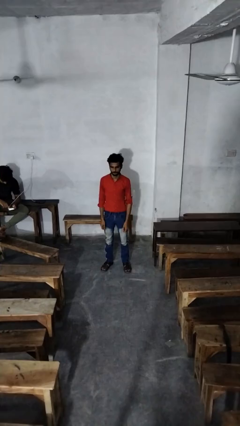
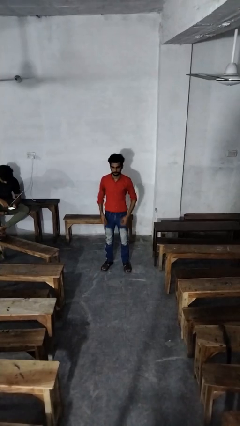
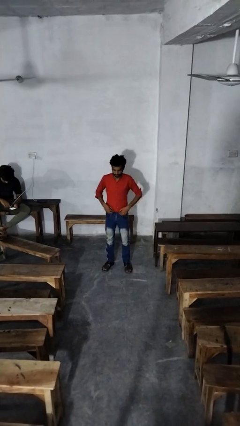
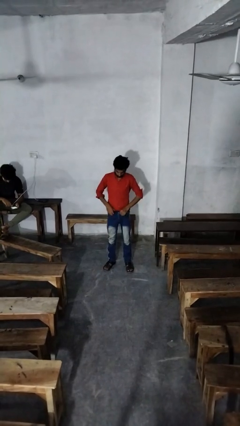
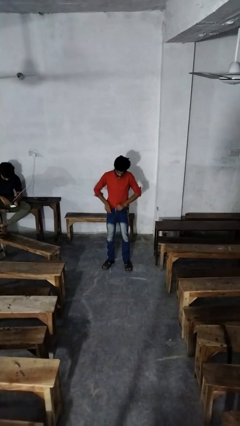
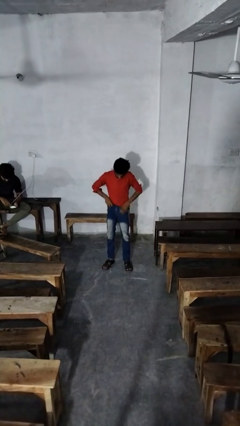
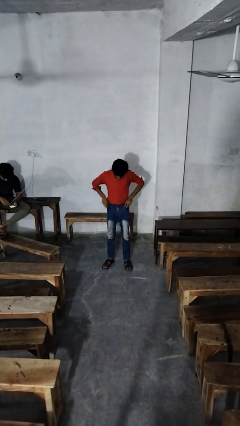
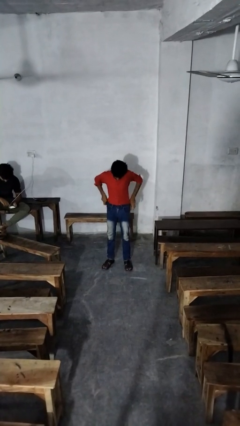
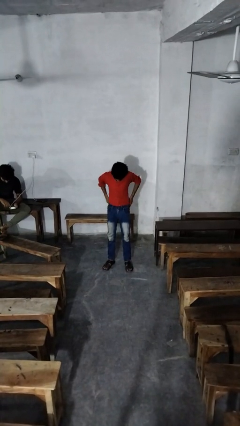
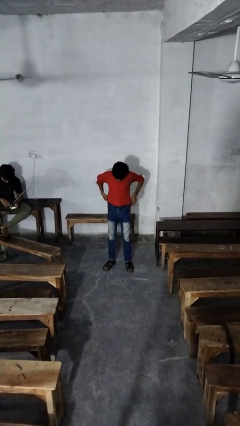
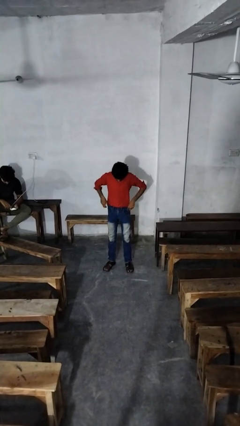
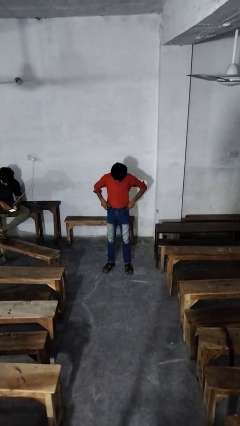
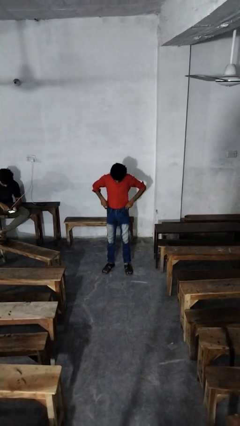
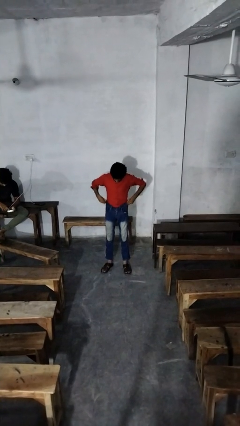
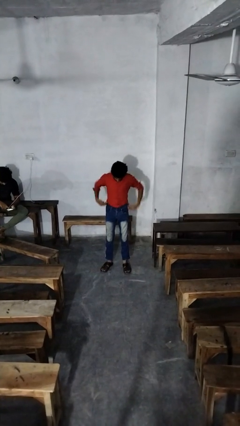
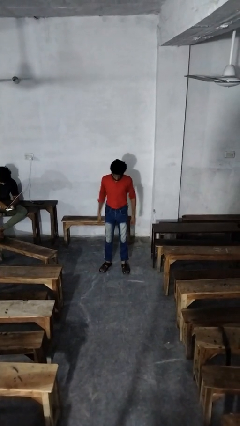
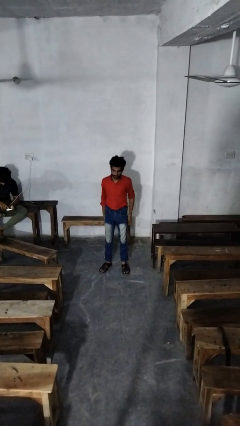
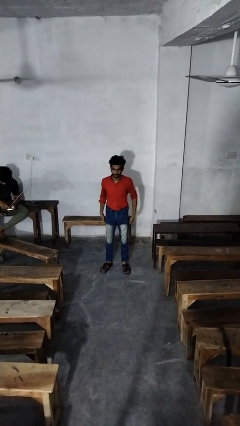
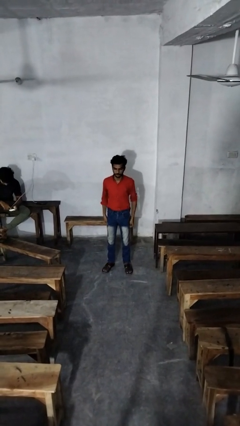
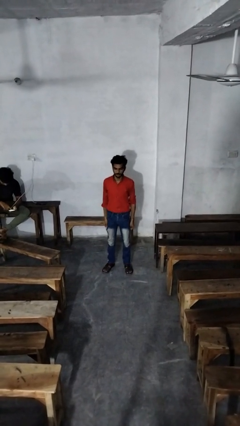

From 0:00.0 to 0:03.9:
person hikes up pants

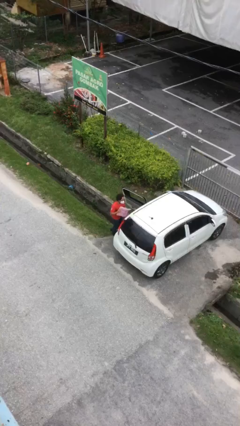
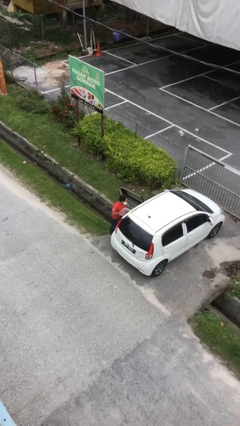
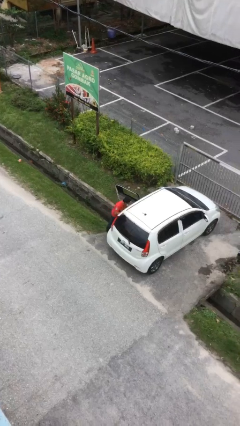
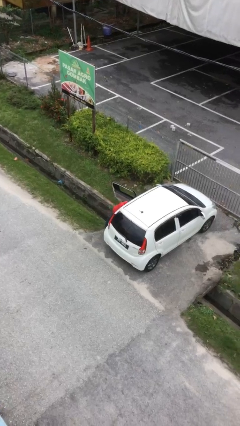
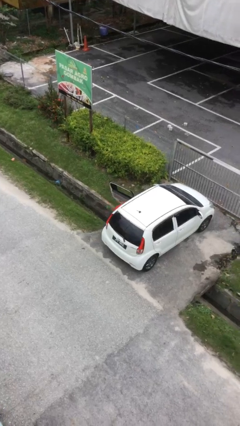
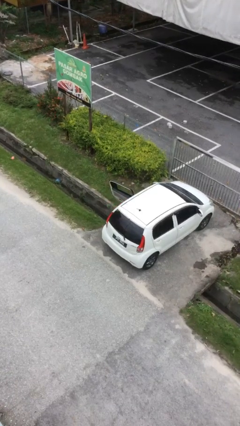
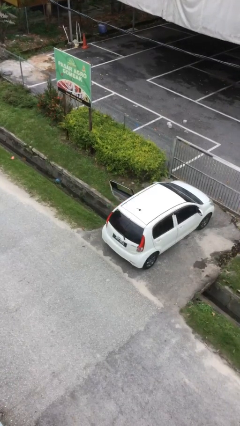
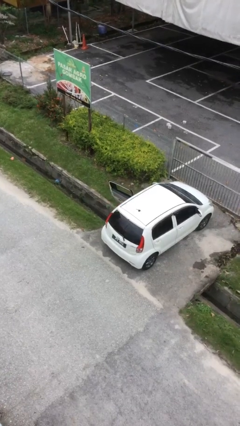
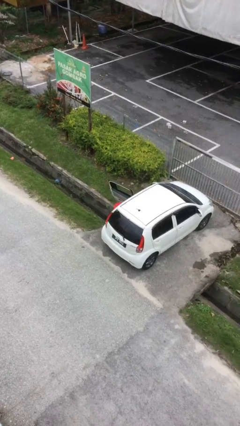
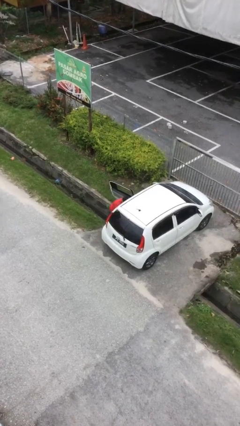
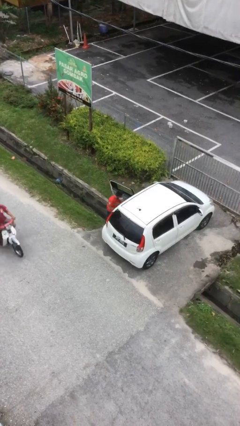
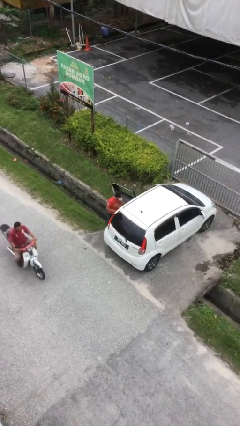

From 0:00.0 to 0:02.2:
person loads car

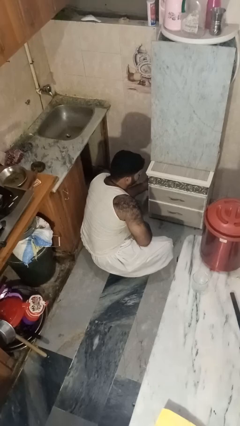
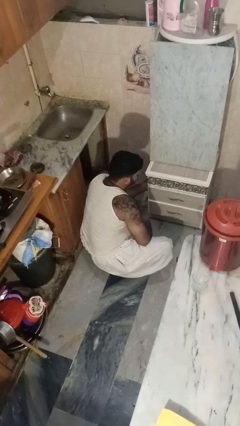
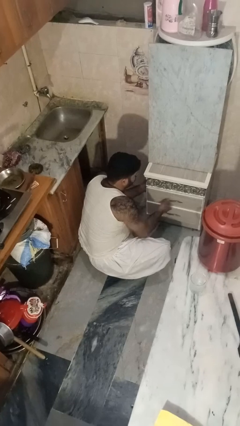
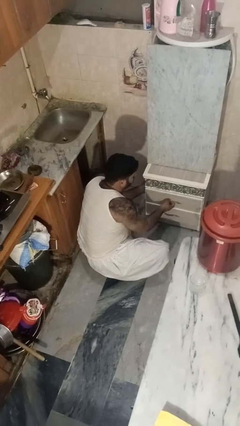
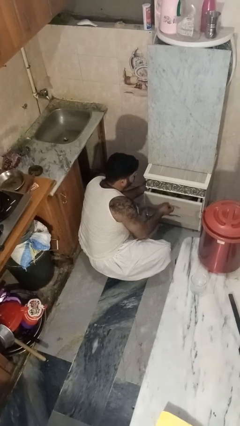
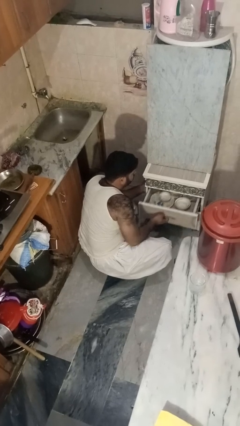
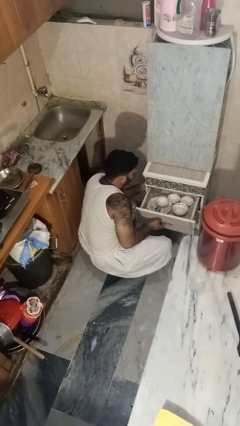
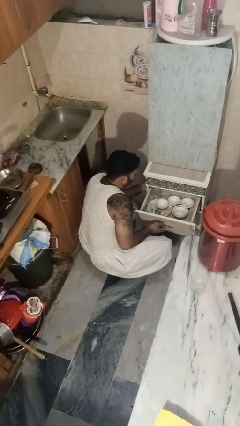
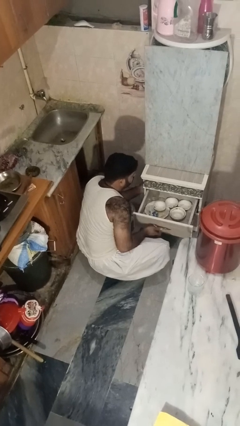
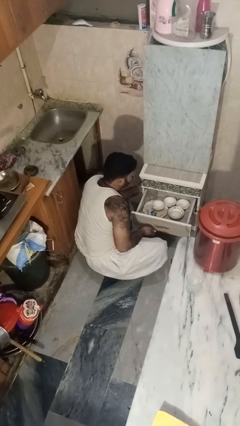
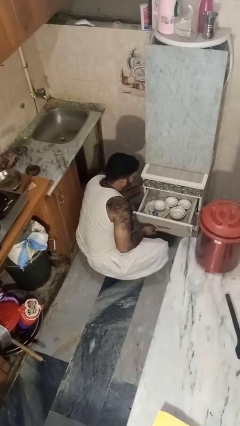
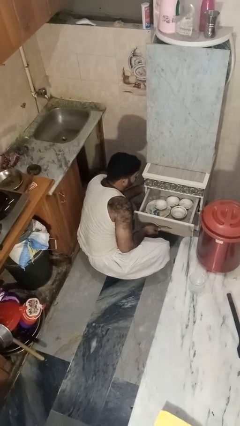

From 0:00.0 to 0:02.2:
person opens kitchen drawer

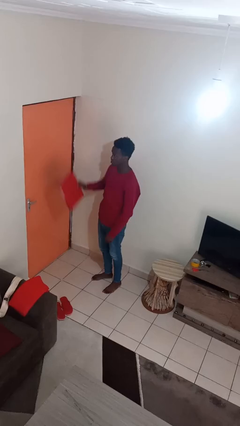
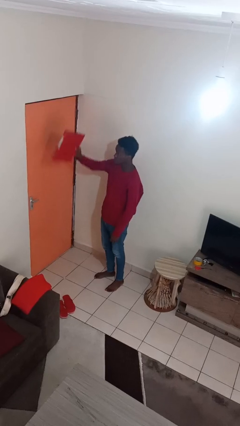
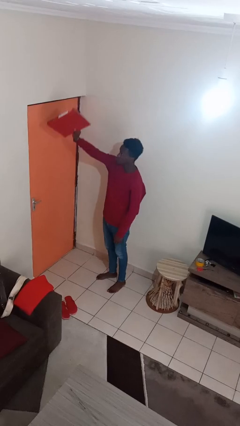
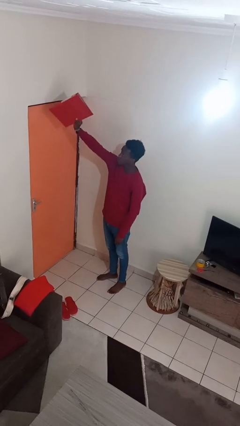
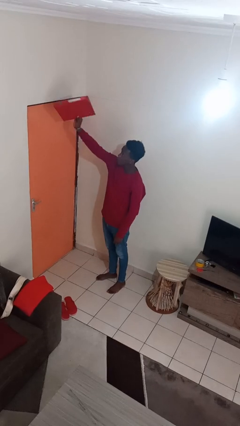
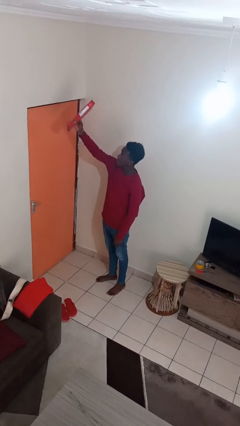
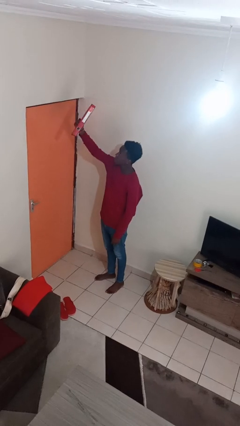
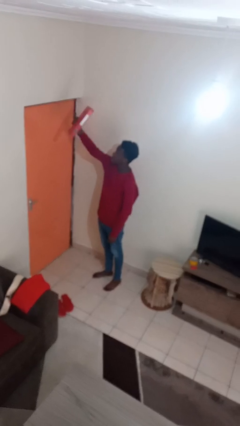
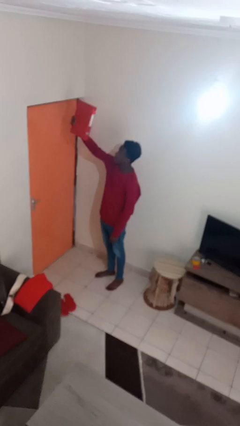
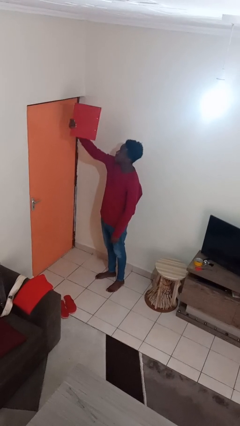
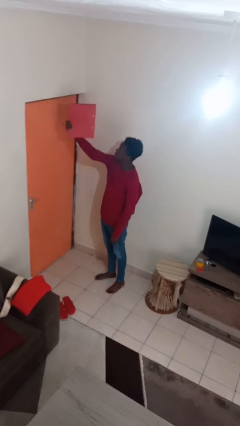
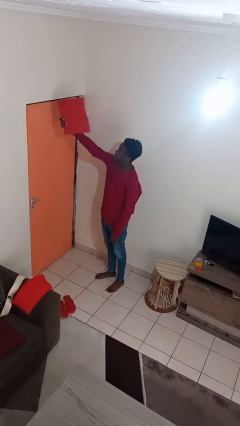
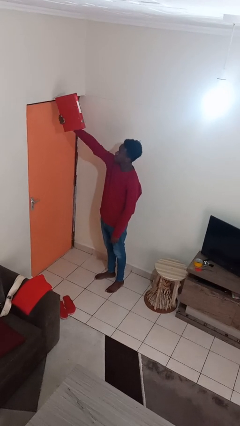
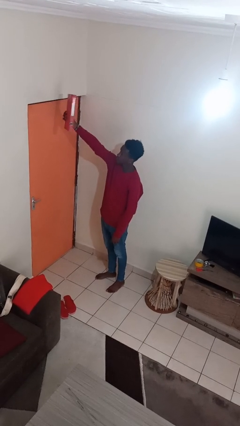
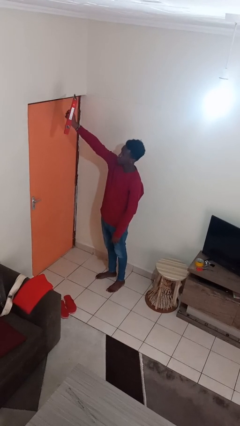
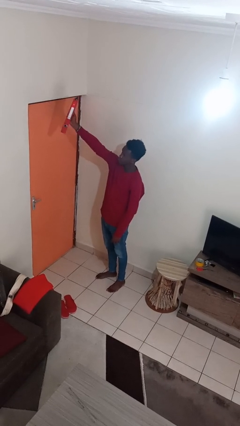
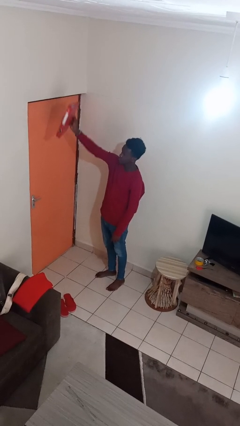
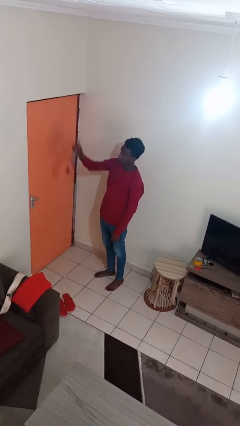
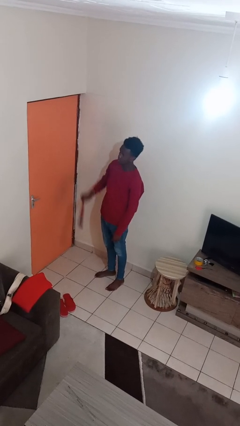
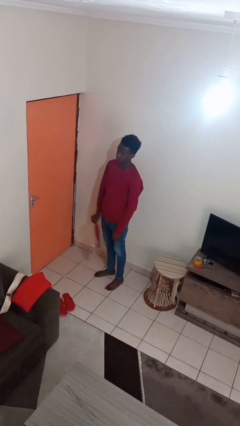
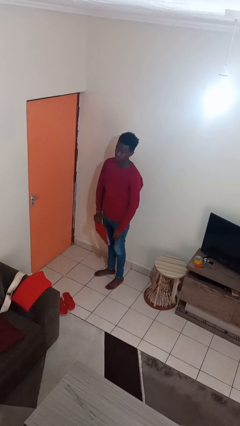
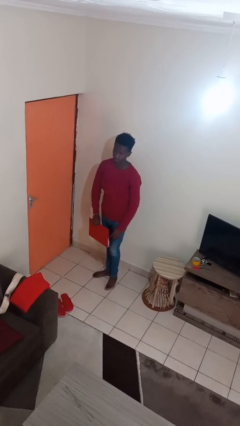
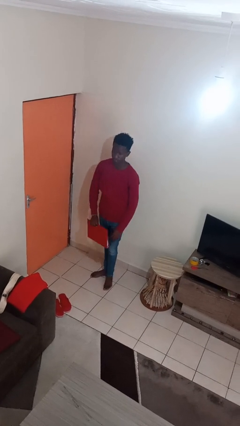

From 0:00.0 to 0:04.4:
person holds object above head

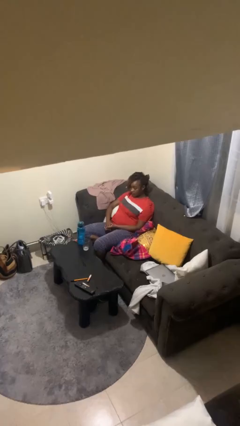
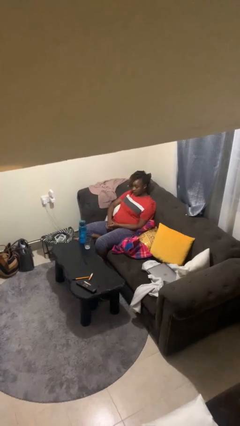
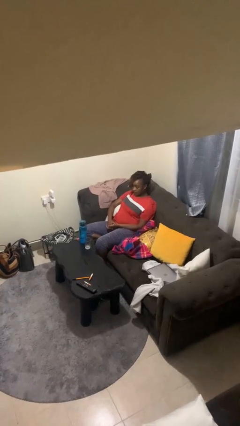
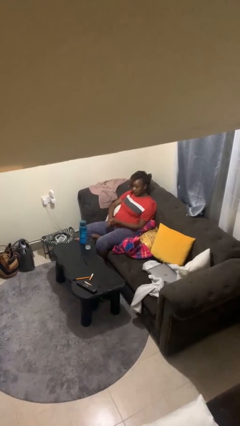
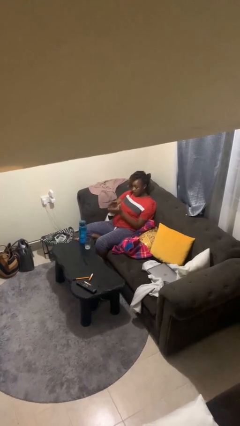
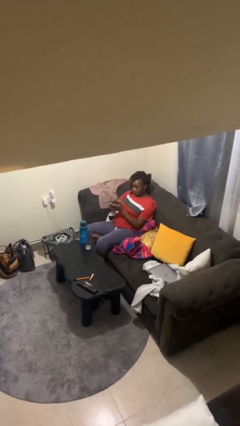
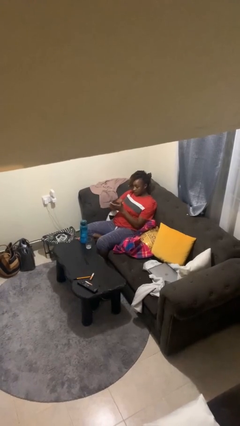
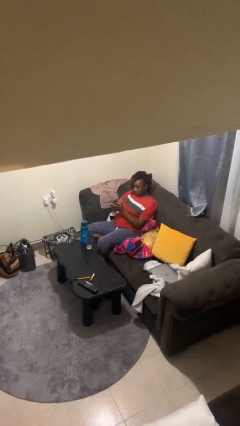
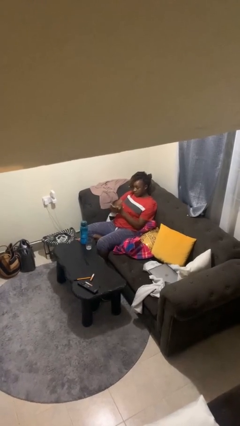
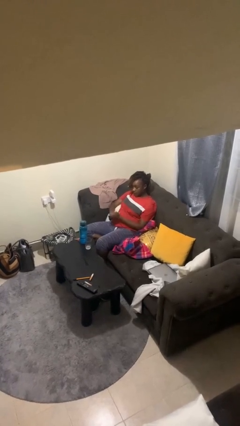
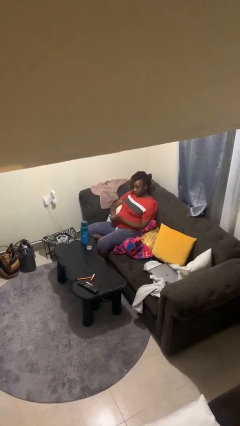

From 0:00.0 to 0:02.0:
person claps hands

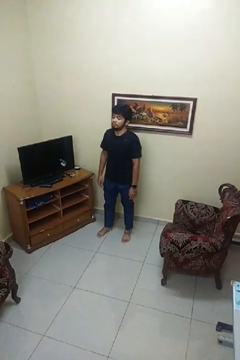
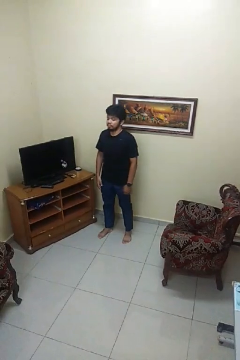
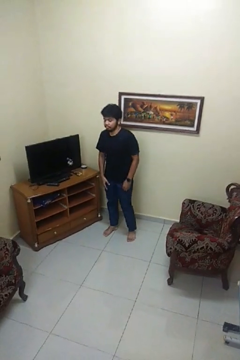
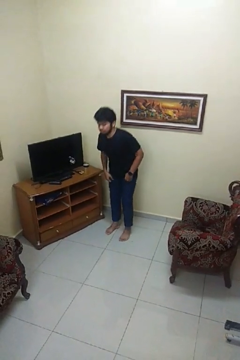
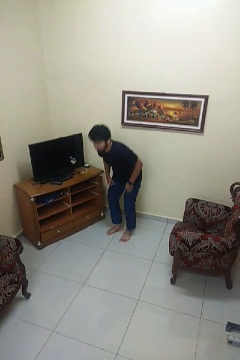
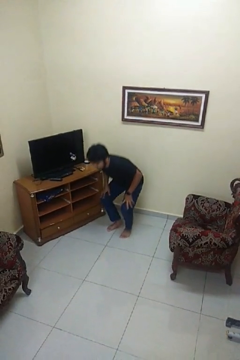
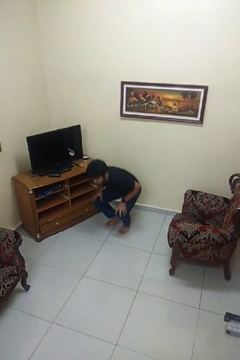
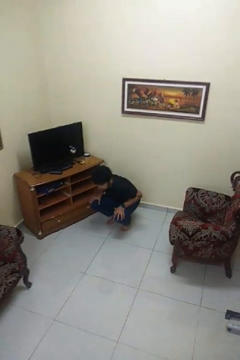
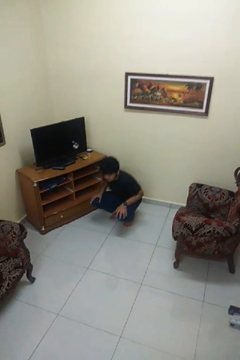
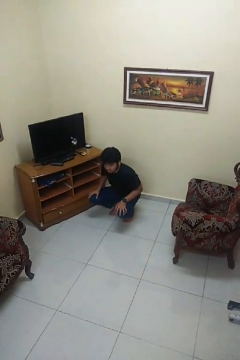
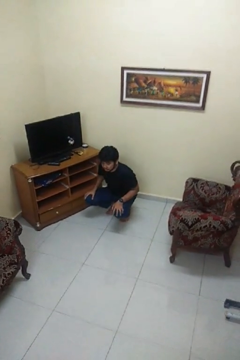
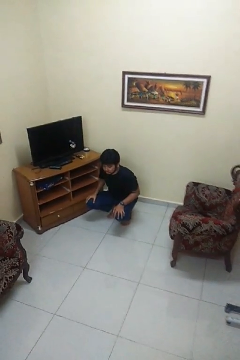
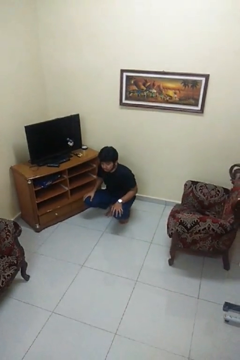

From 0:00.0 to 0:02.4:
person squats

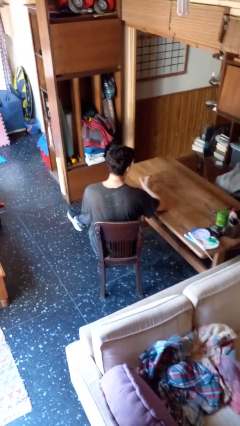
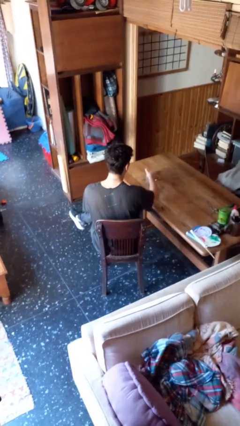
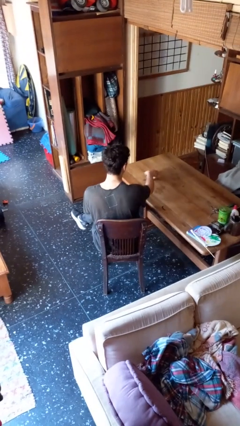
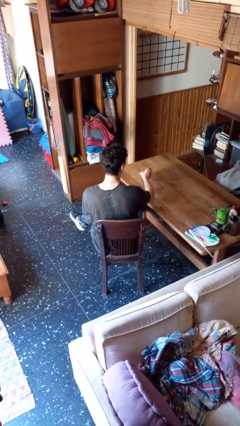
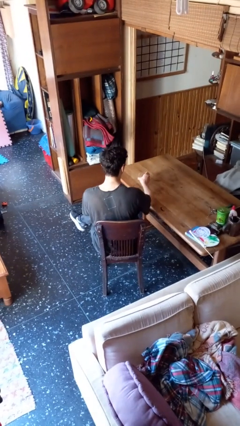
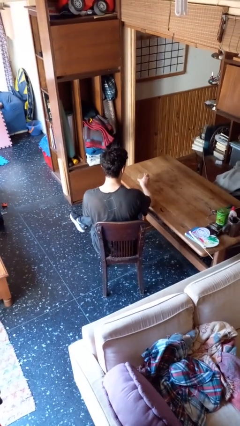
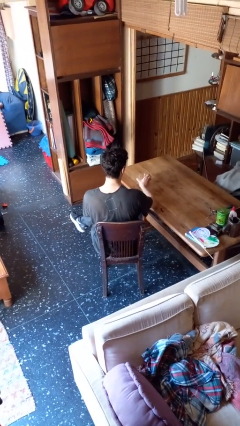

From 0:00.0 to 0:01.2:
person sets upright glass
